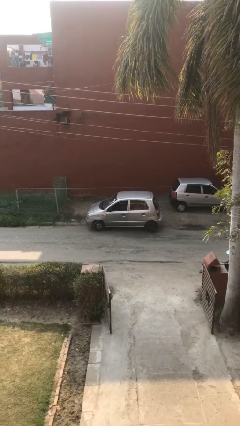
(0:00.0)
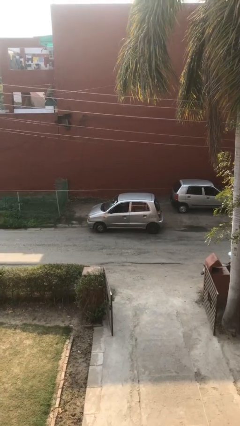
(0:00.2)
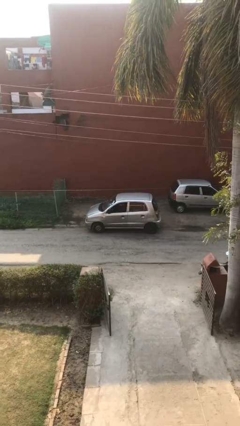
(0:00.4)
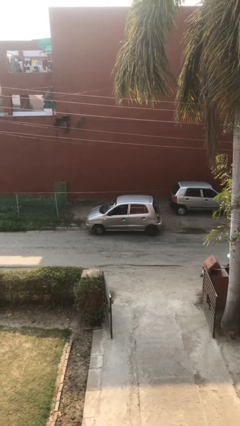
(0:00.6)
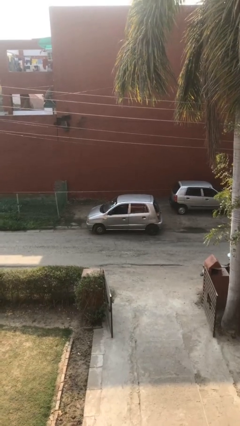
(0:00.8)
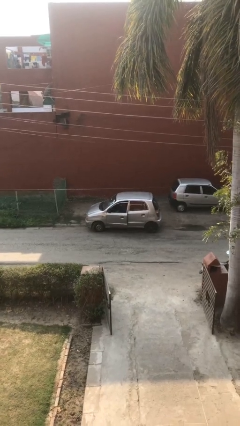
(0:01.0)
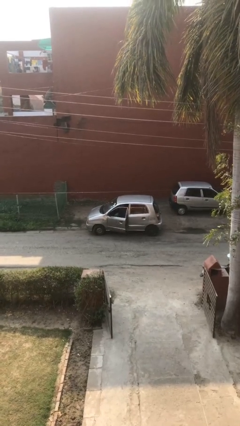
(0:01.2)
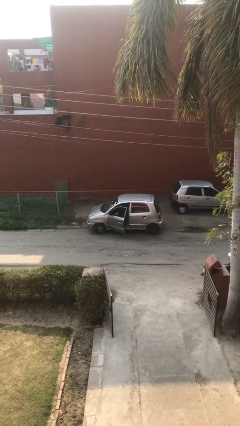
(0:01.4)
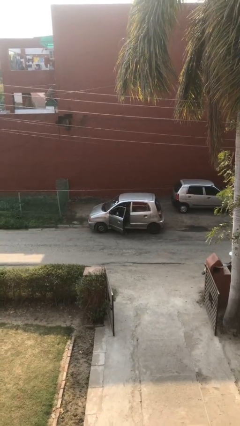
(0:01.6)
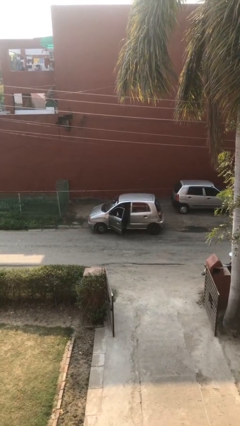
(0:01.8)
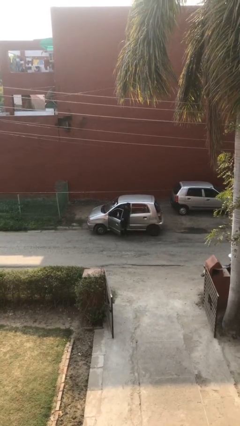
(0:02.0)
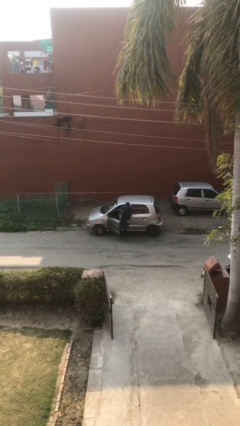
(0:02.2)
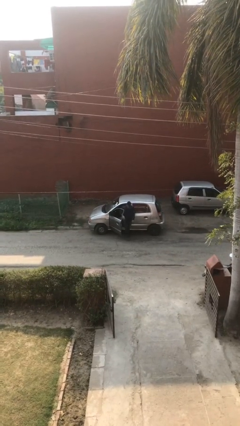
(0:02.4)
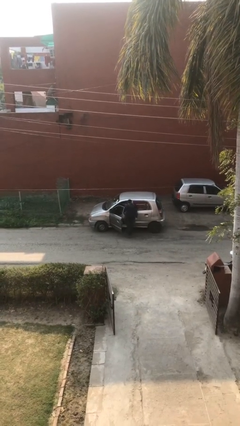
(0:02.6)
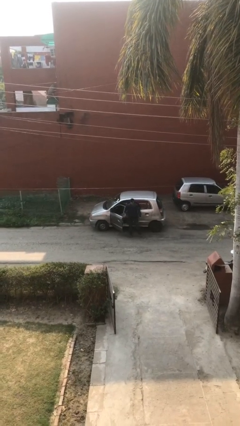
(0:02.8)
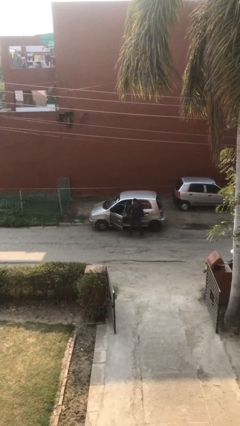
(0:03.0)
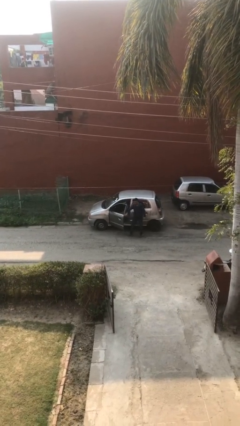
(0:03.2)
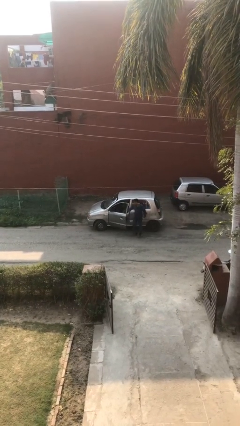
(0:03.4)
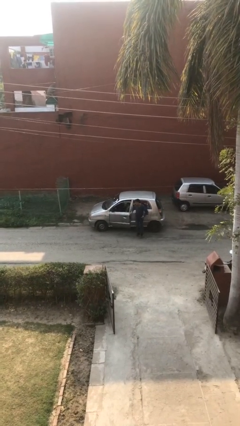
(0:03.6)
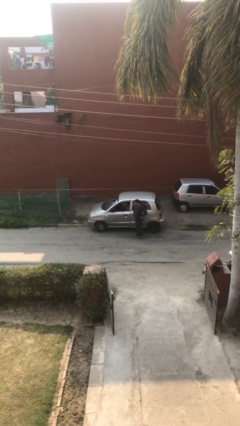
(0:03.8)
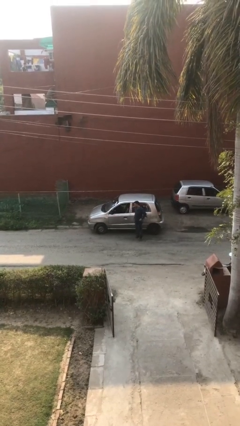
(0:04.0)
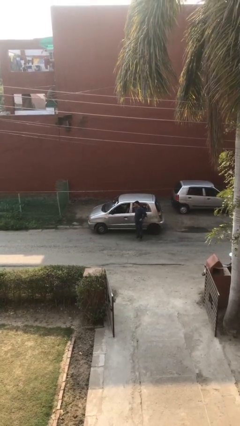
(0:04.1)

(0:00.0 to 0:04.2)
car drops off person

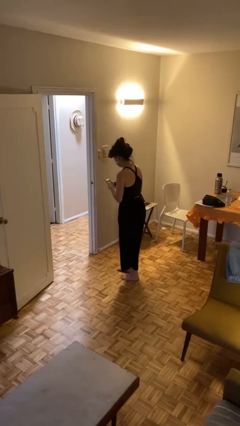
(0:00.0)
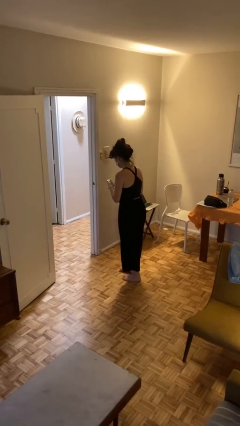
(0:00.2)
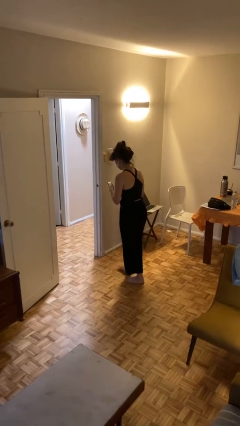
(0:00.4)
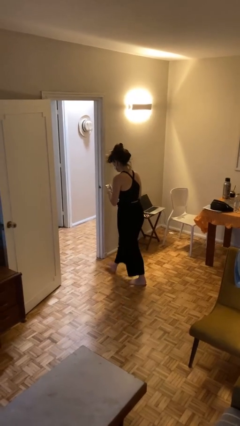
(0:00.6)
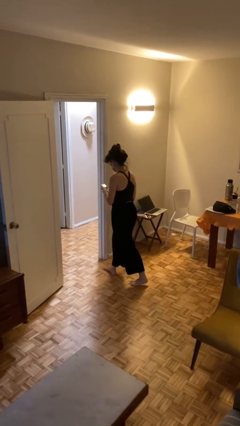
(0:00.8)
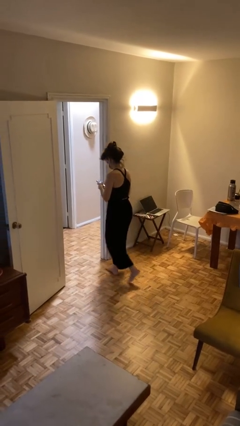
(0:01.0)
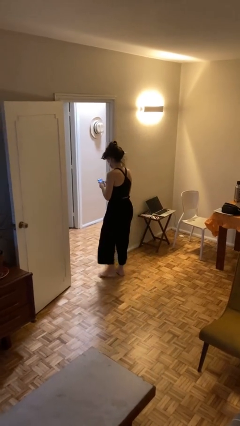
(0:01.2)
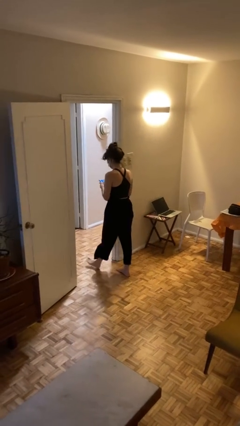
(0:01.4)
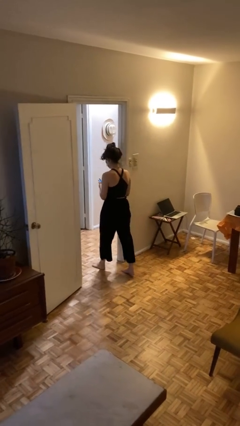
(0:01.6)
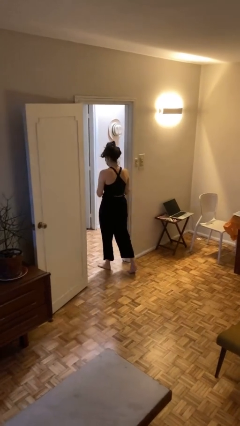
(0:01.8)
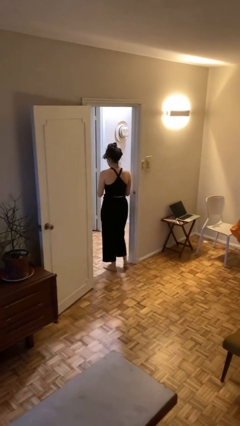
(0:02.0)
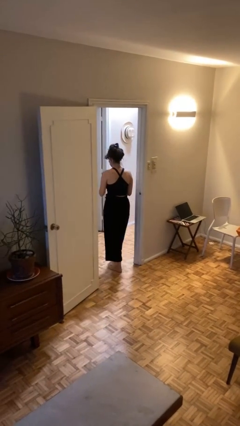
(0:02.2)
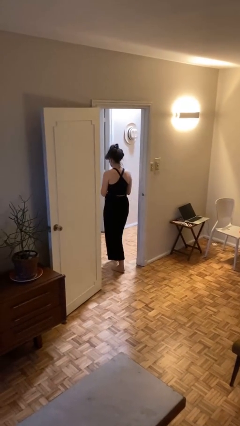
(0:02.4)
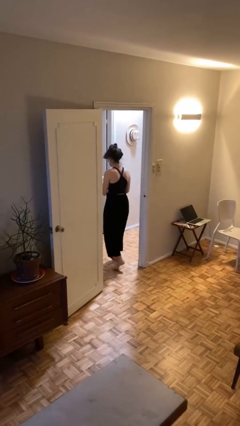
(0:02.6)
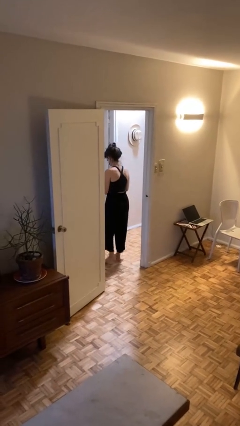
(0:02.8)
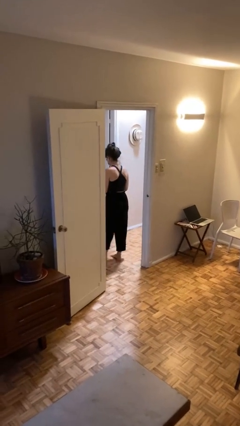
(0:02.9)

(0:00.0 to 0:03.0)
person exits scene through structure

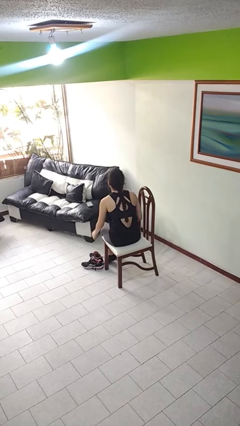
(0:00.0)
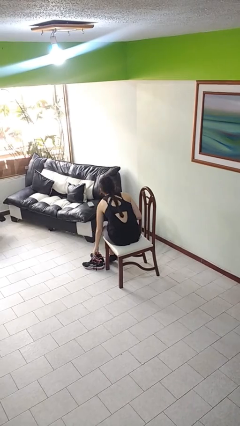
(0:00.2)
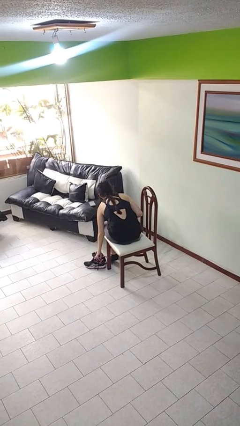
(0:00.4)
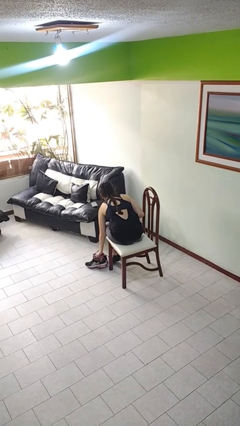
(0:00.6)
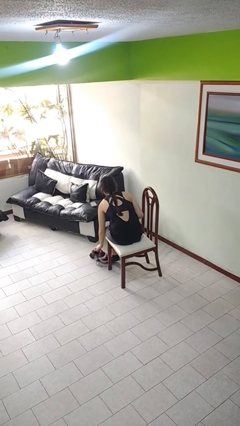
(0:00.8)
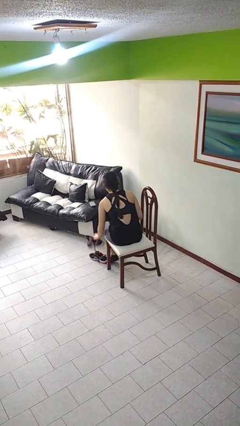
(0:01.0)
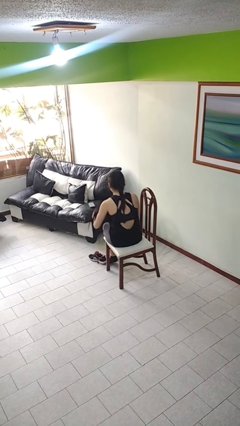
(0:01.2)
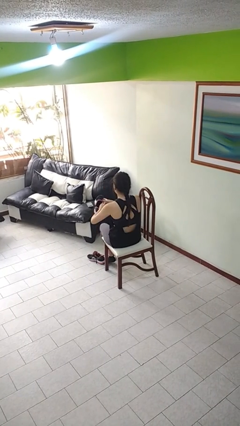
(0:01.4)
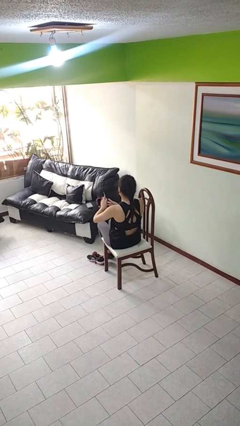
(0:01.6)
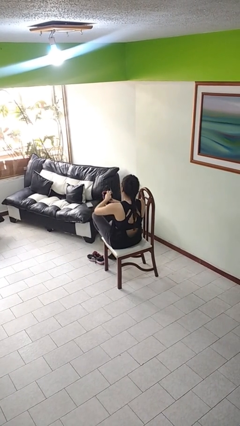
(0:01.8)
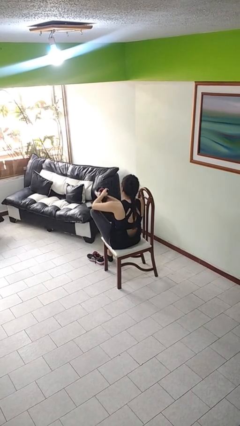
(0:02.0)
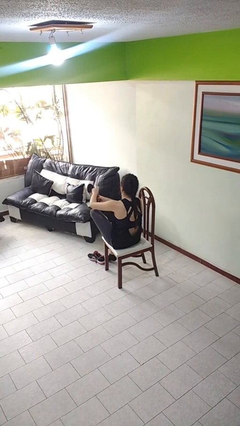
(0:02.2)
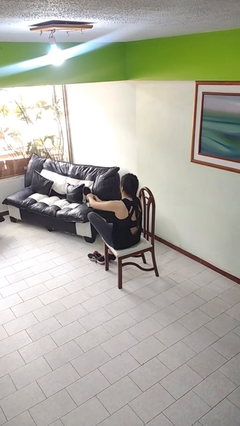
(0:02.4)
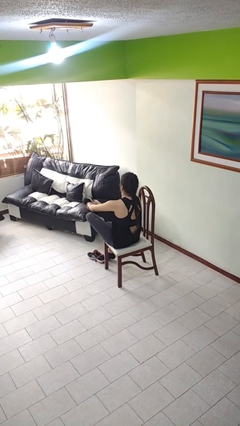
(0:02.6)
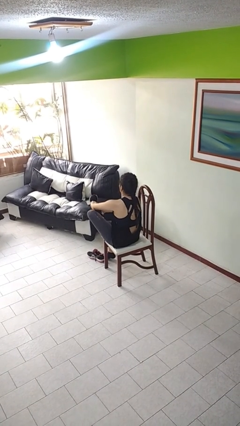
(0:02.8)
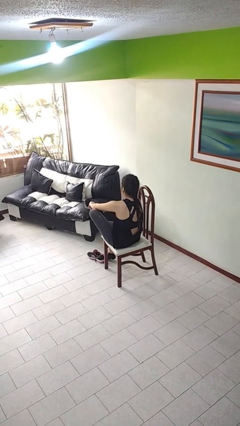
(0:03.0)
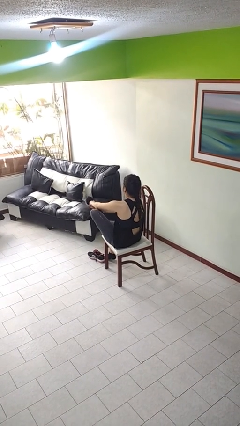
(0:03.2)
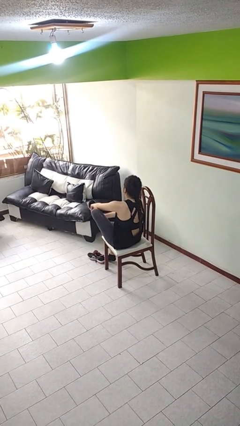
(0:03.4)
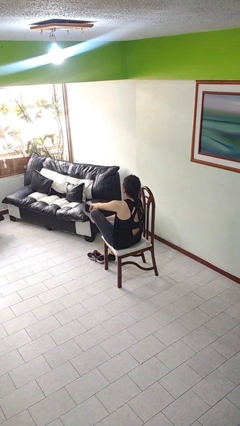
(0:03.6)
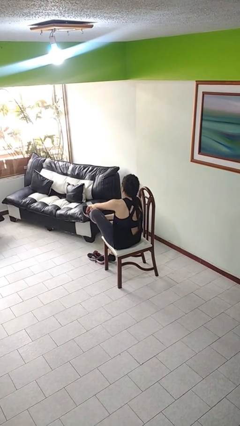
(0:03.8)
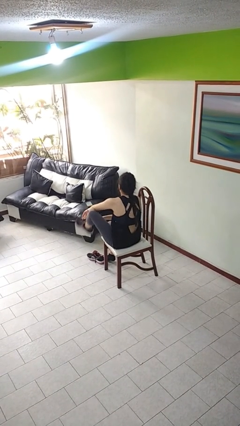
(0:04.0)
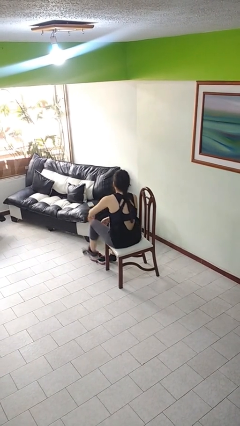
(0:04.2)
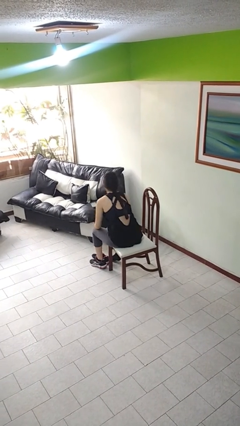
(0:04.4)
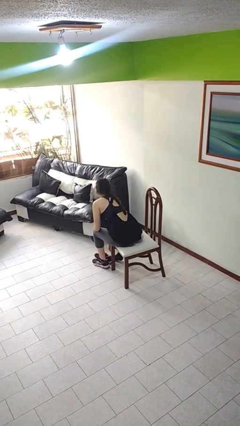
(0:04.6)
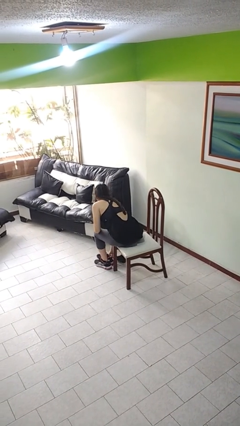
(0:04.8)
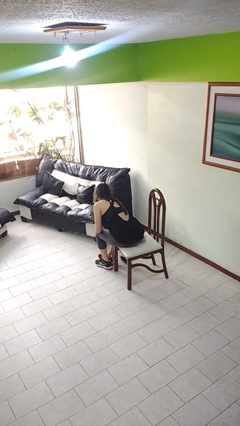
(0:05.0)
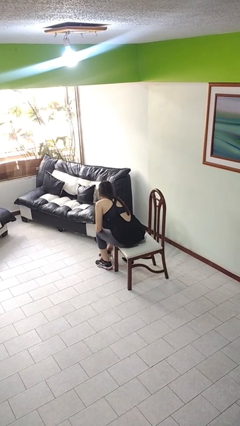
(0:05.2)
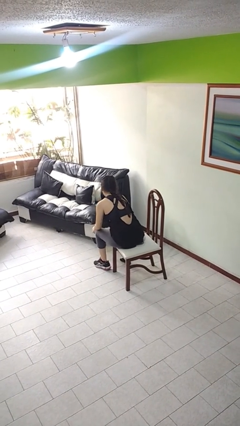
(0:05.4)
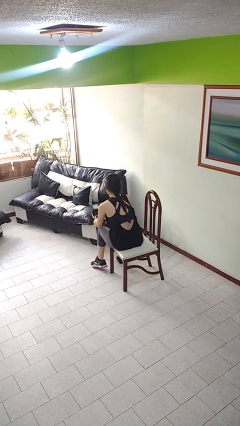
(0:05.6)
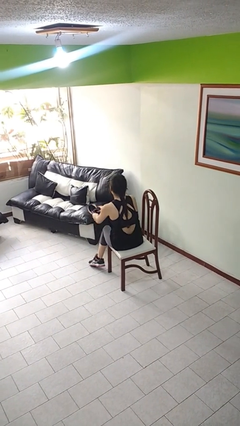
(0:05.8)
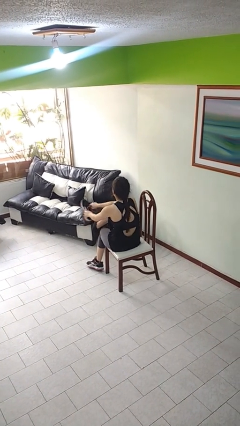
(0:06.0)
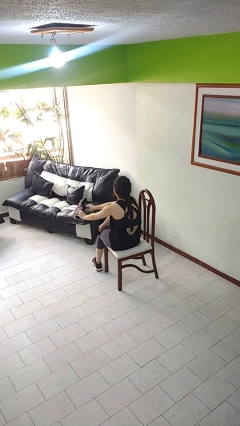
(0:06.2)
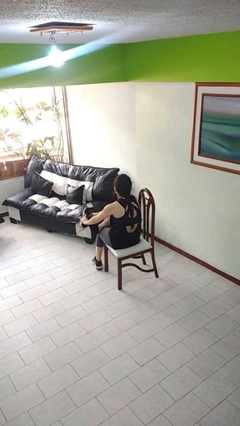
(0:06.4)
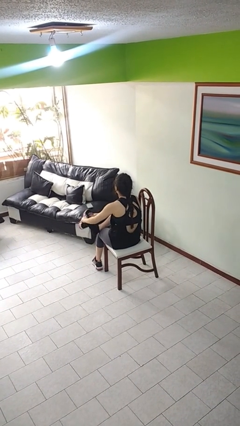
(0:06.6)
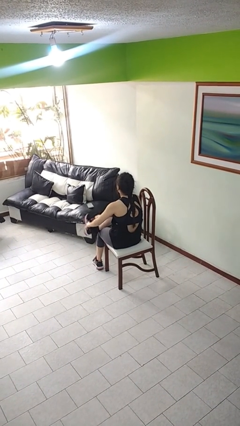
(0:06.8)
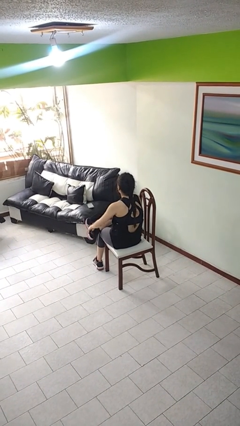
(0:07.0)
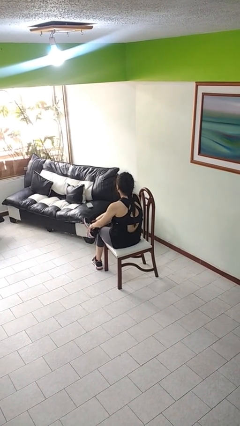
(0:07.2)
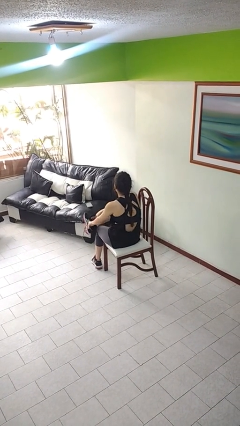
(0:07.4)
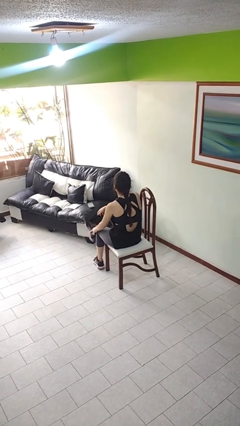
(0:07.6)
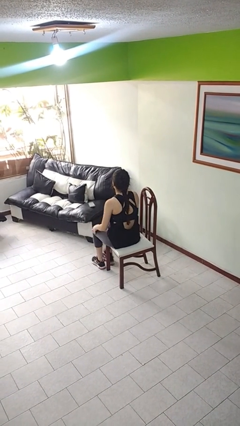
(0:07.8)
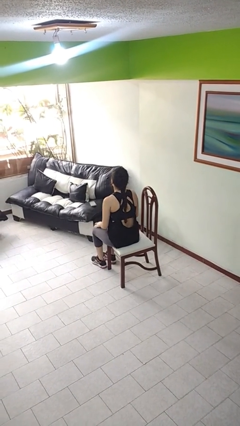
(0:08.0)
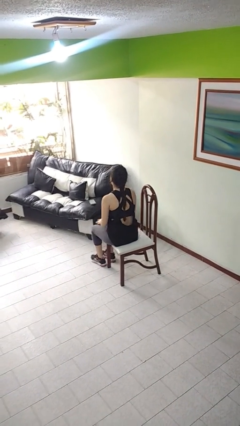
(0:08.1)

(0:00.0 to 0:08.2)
person puts on shoes

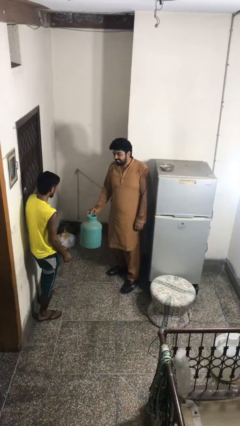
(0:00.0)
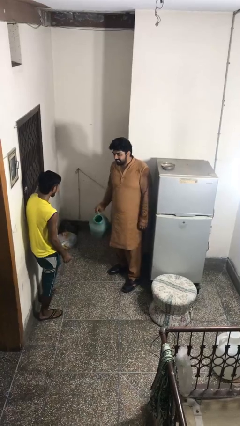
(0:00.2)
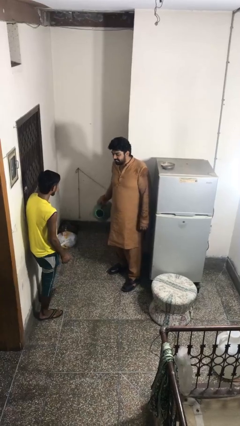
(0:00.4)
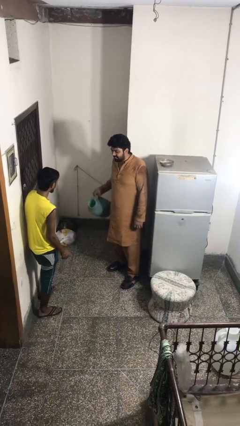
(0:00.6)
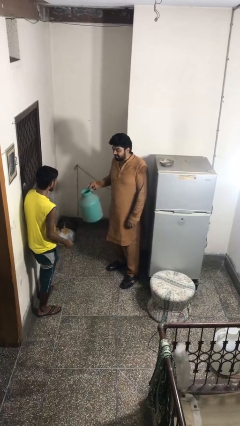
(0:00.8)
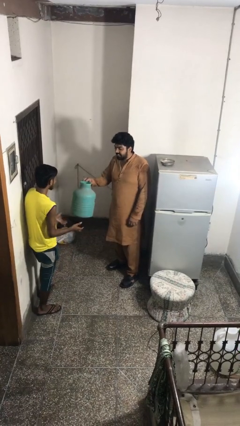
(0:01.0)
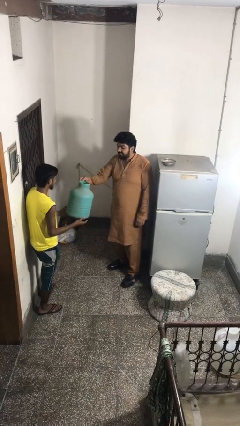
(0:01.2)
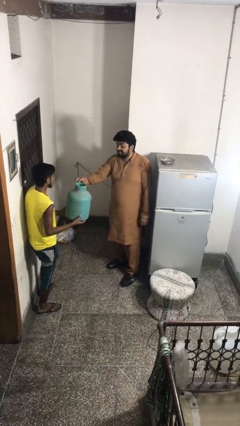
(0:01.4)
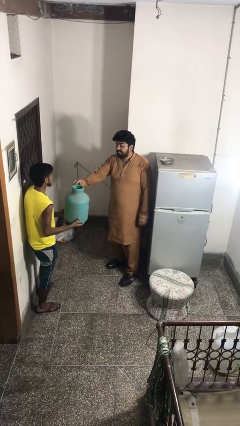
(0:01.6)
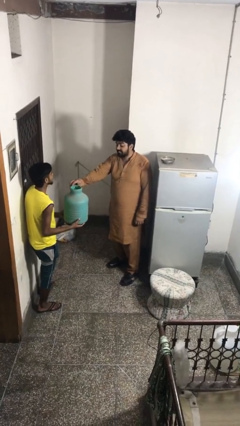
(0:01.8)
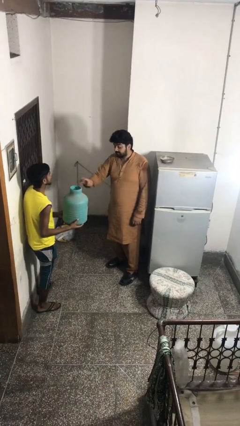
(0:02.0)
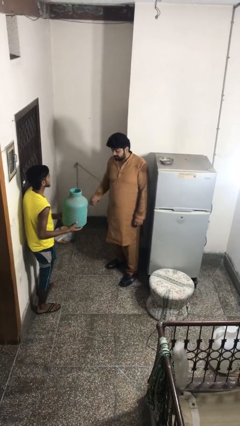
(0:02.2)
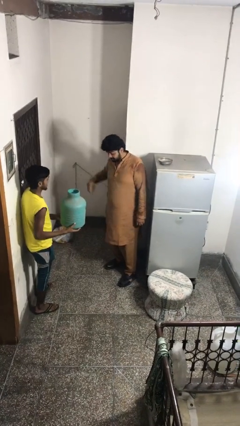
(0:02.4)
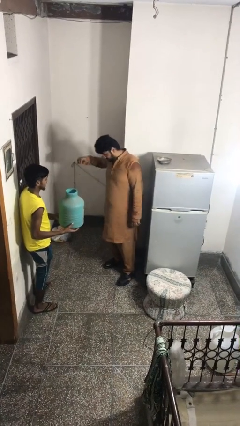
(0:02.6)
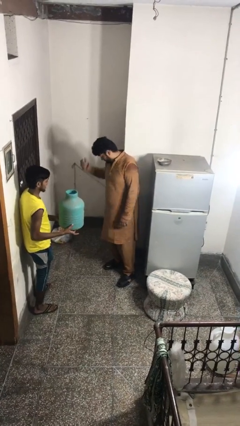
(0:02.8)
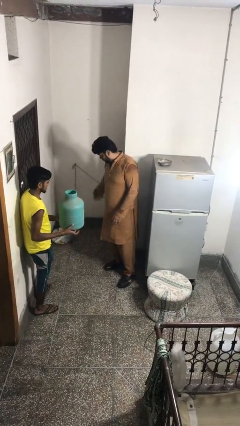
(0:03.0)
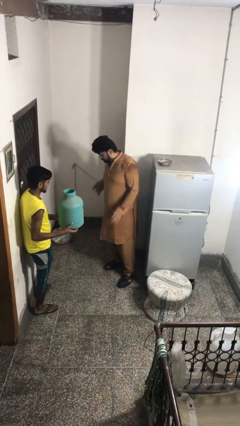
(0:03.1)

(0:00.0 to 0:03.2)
person transfers object to person
